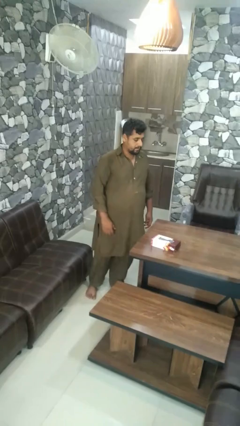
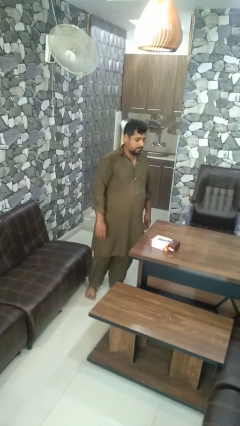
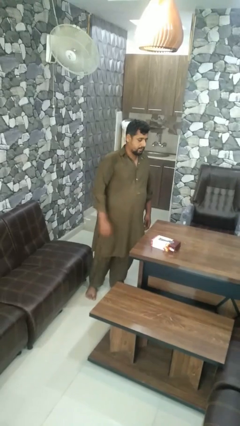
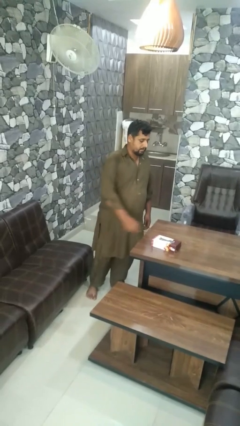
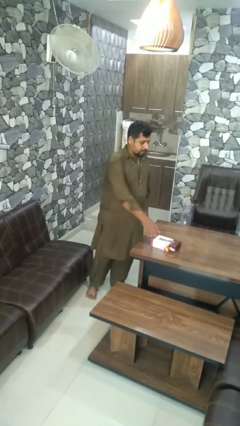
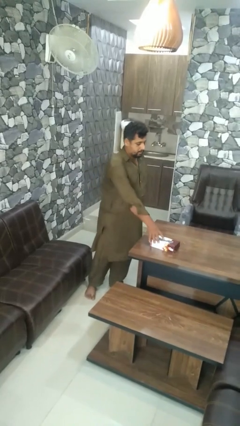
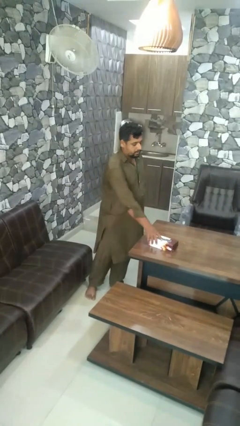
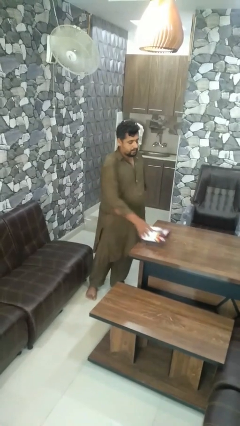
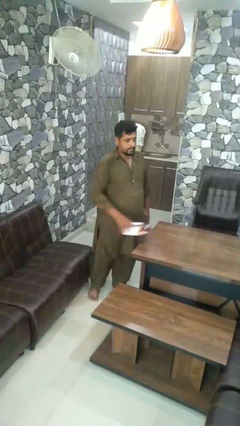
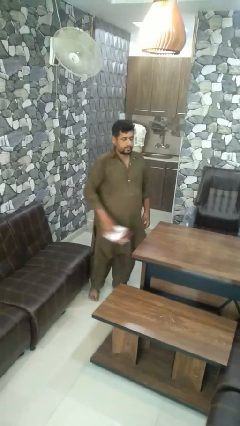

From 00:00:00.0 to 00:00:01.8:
person picks up object from table

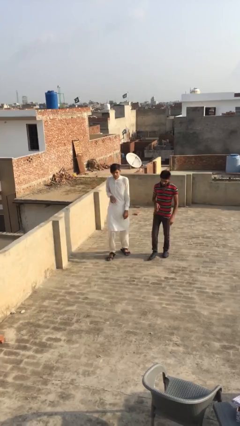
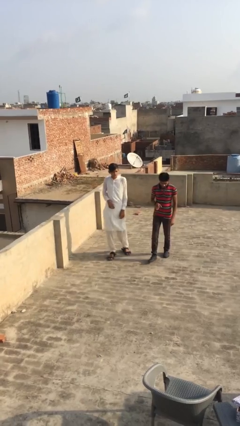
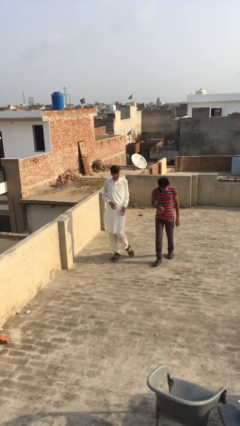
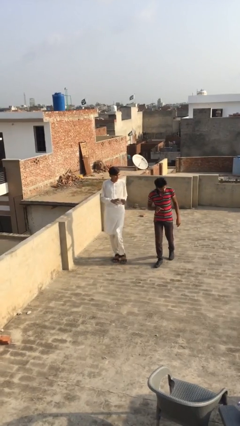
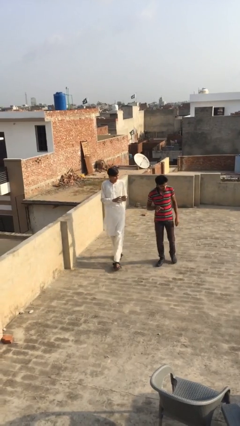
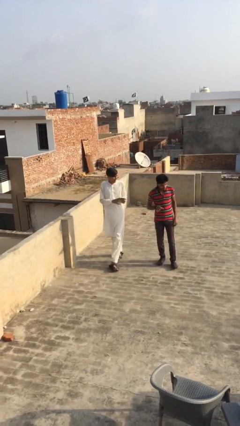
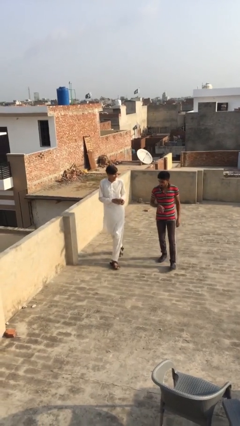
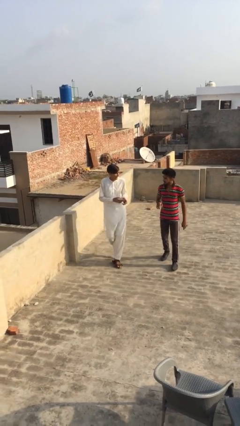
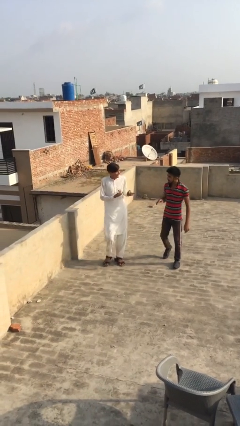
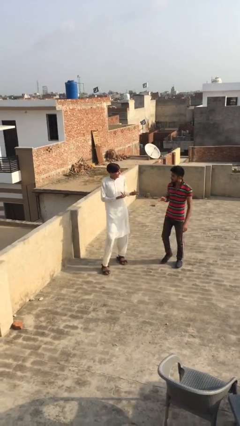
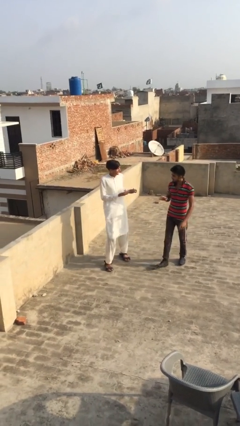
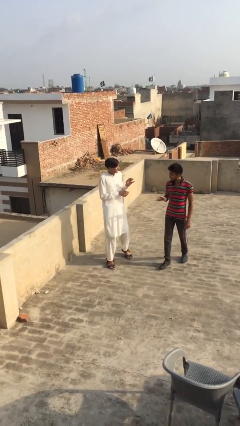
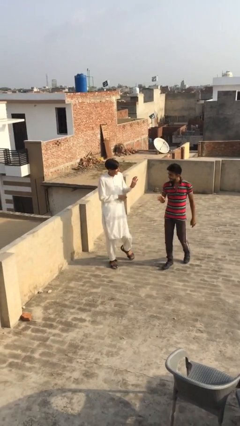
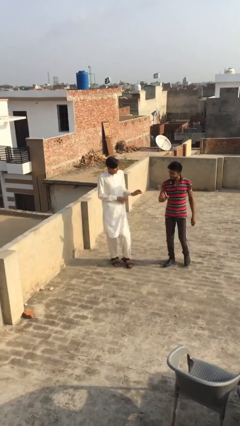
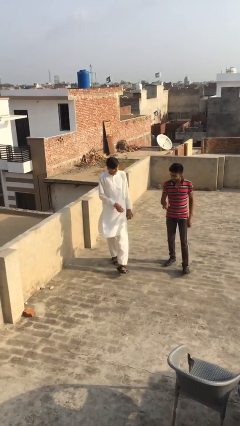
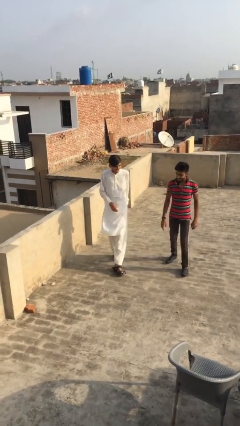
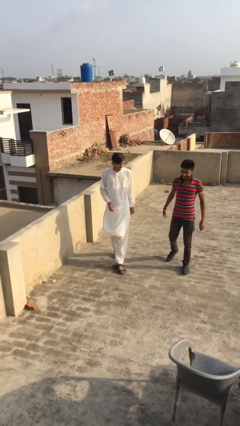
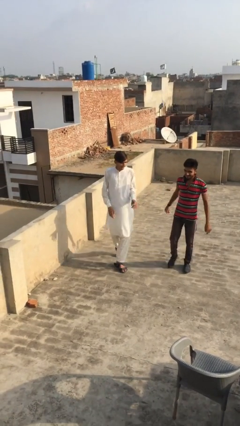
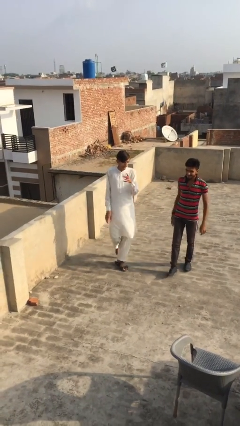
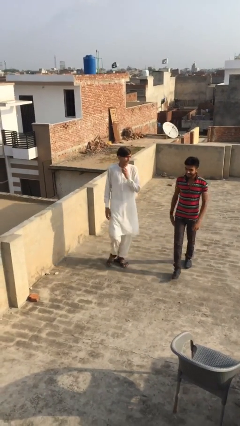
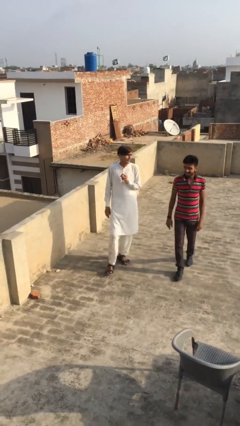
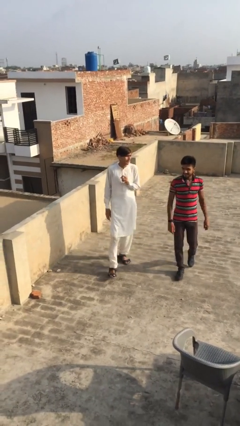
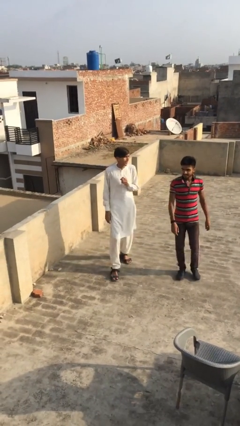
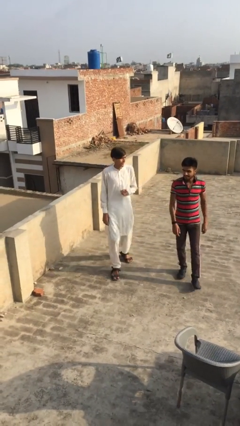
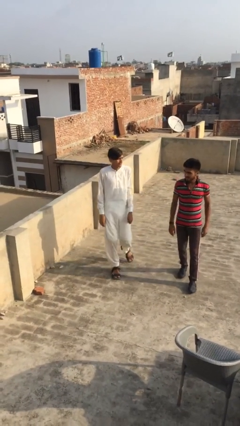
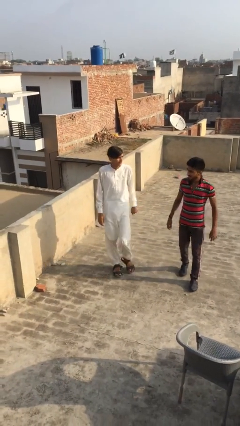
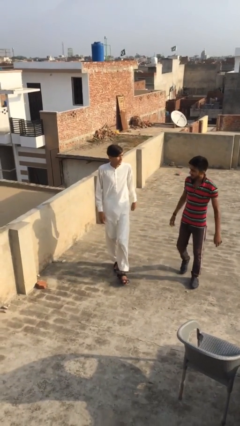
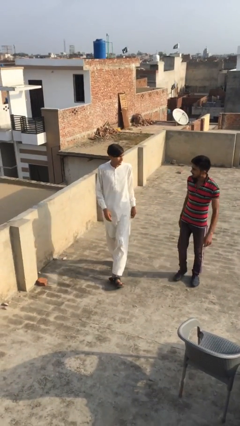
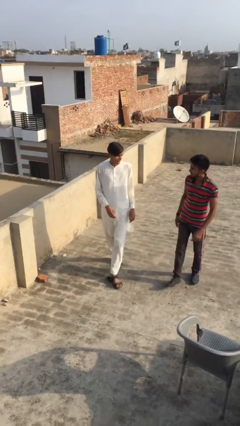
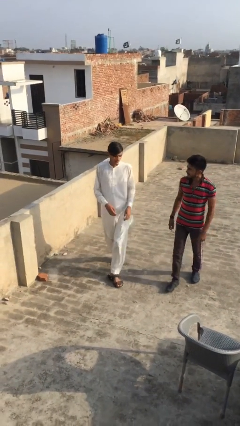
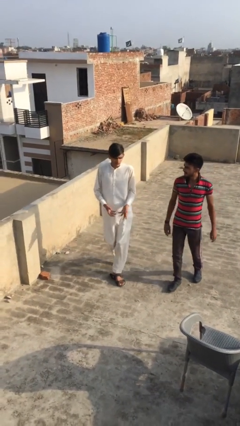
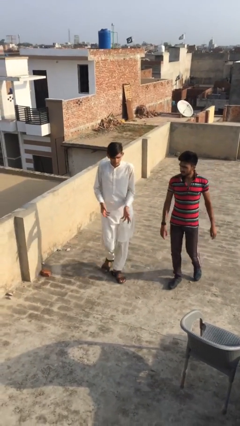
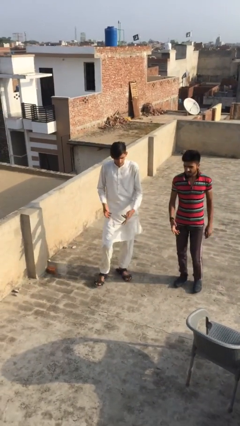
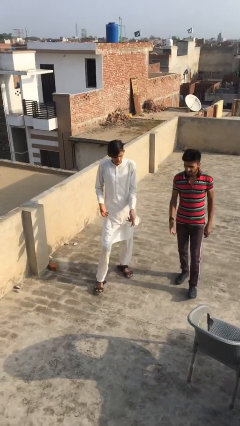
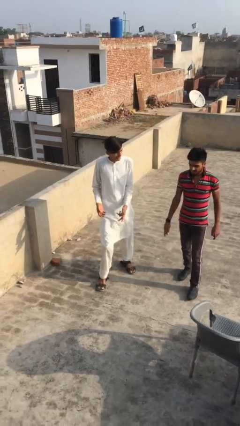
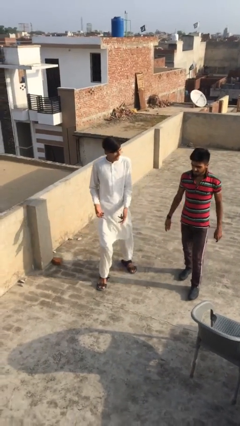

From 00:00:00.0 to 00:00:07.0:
person talks to person

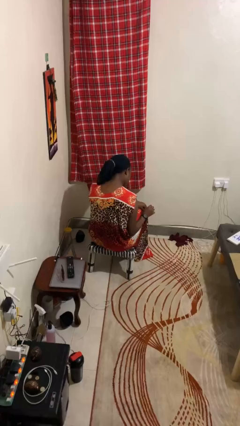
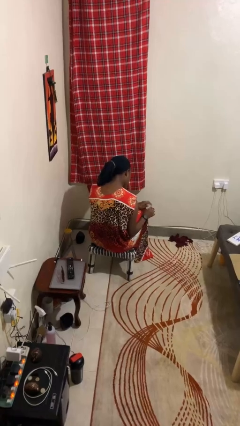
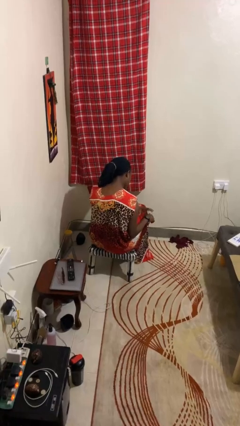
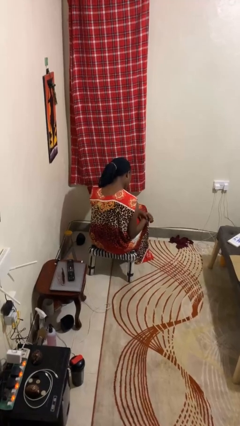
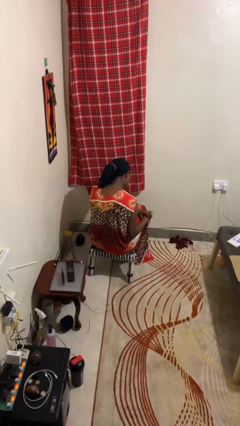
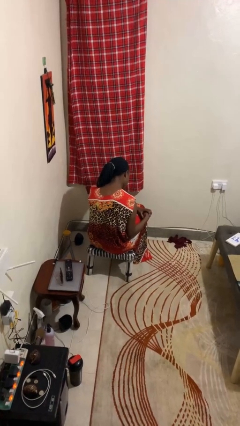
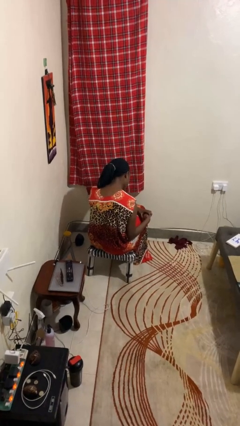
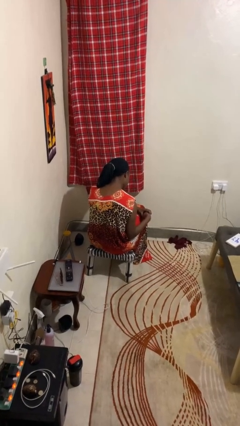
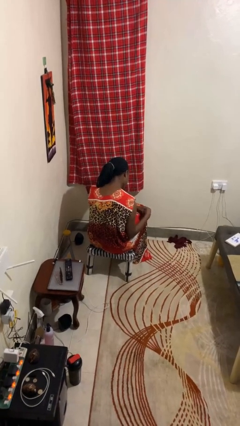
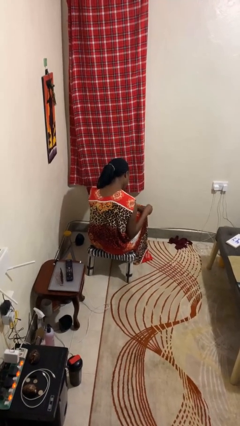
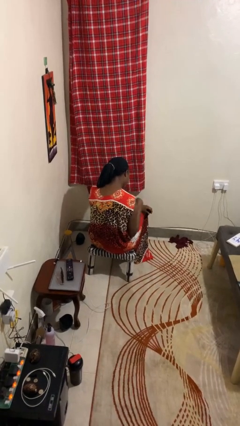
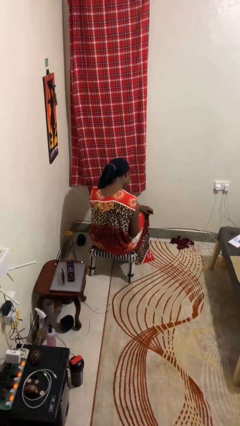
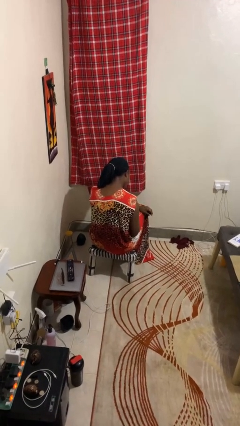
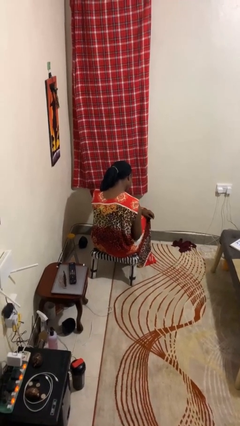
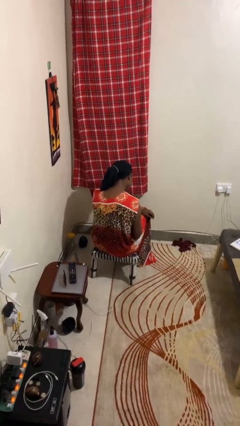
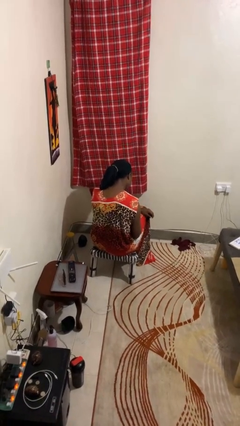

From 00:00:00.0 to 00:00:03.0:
person takes off wristwatch

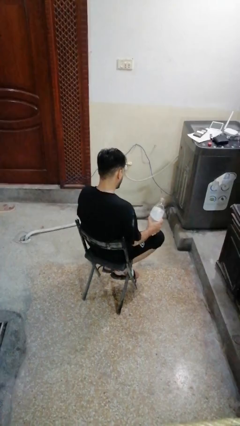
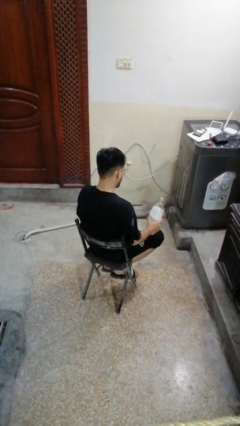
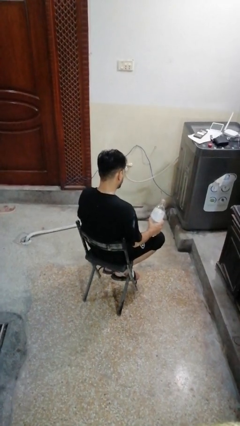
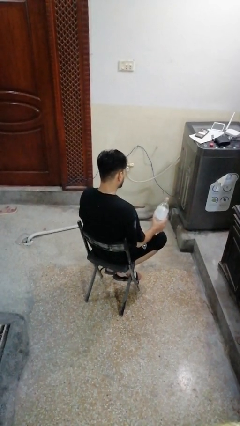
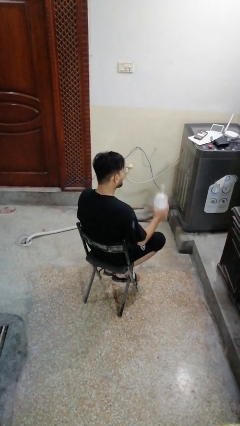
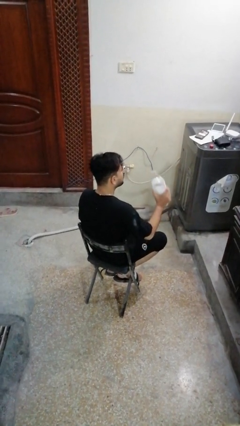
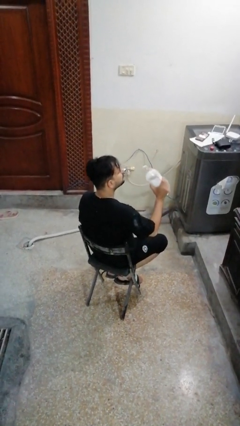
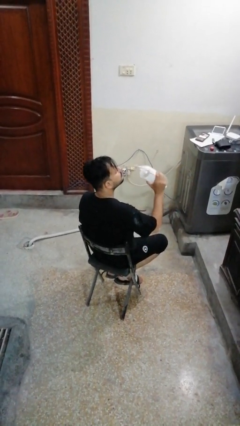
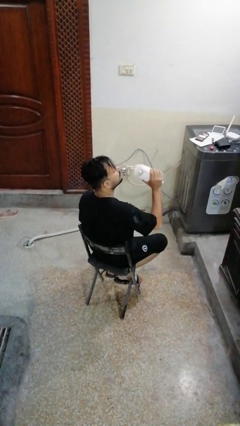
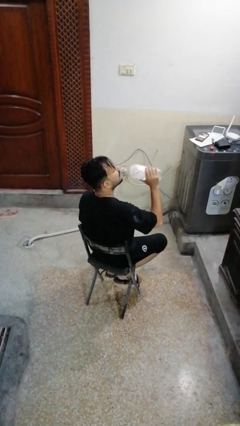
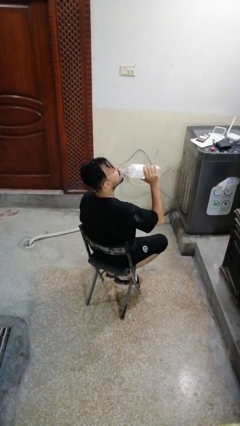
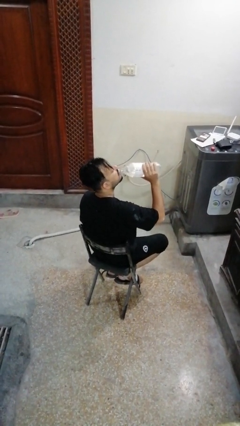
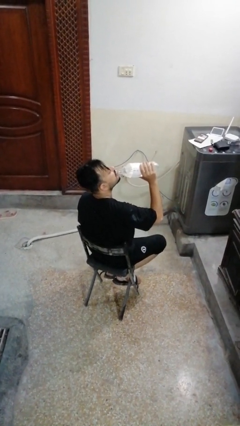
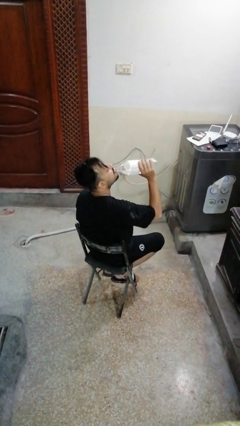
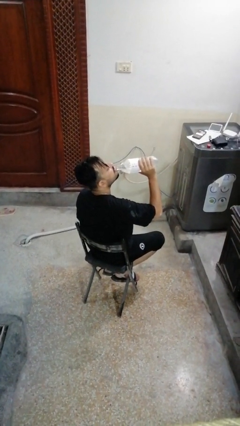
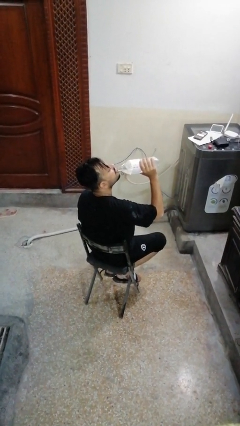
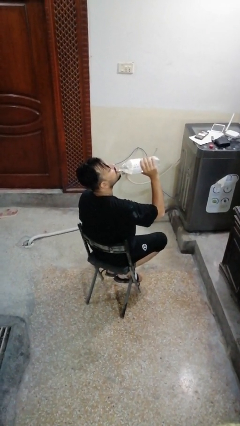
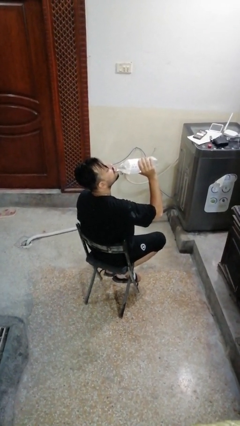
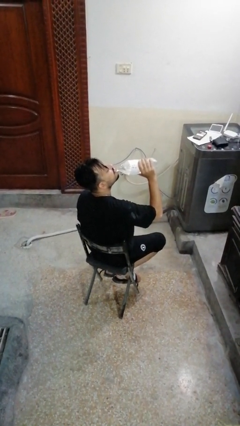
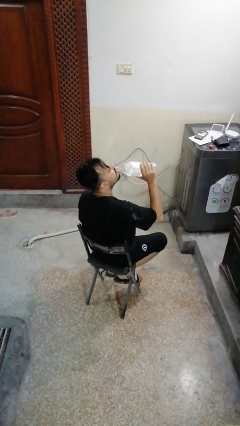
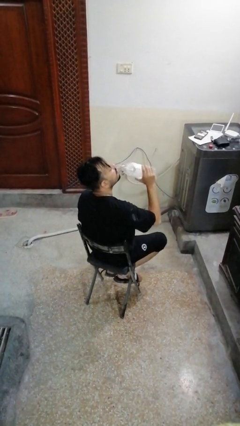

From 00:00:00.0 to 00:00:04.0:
person drinks from bottle

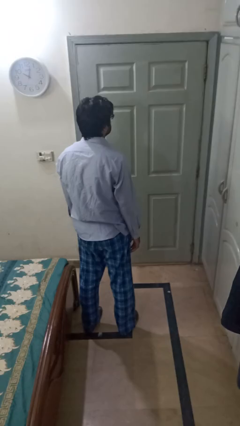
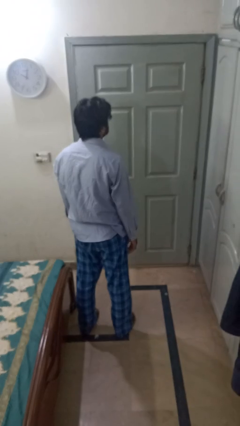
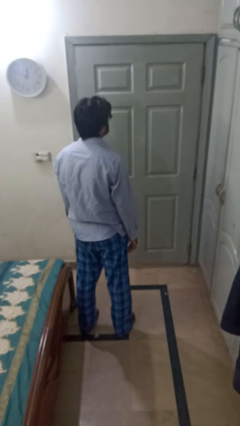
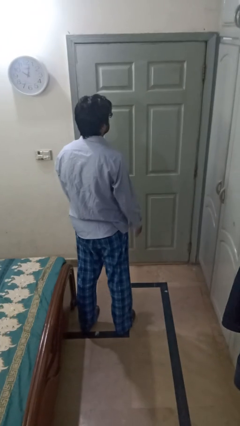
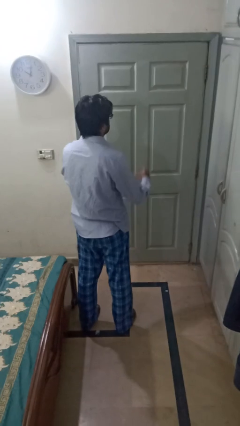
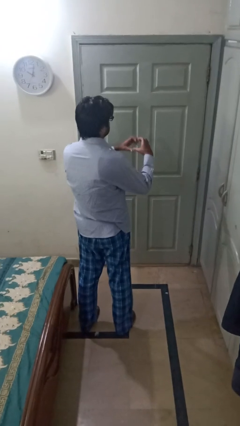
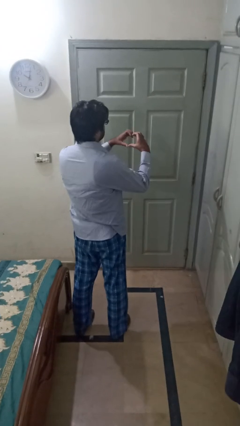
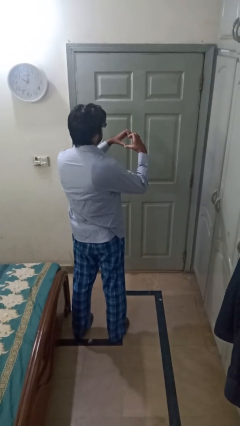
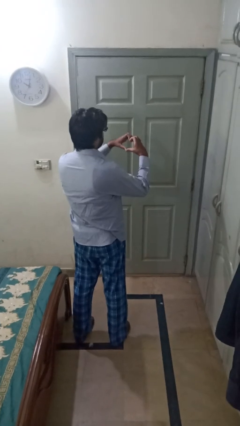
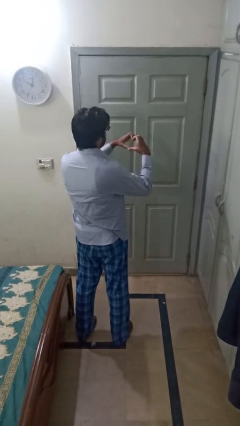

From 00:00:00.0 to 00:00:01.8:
person gestures heart
